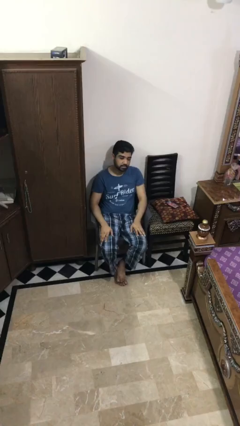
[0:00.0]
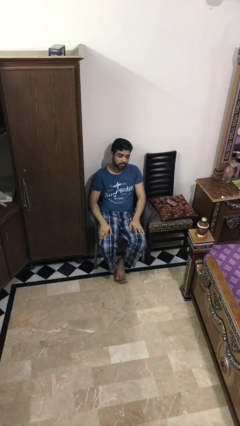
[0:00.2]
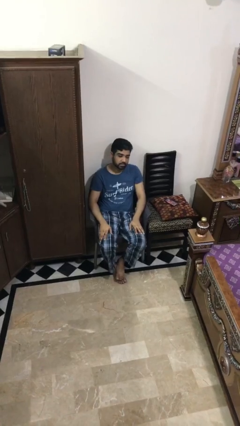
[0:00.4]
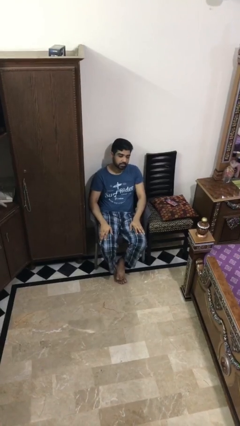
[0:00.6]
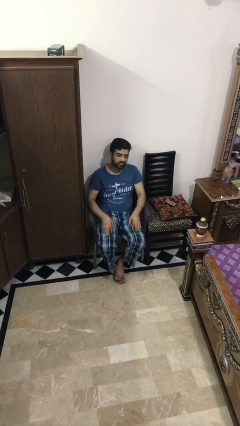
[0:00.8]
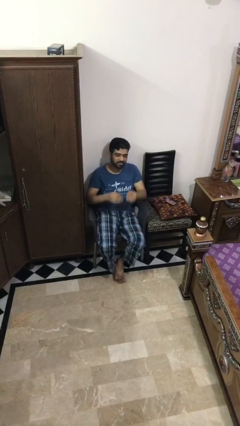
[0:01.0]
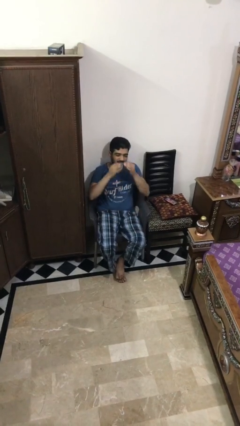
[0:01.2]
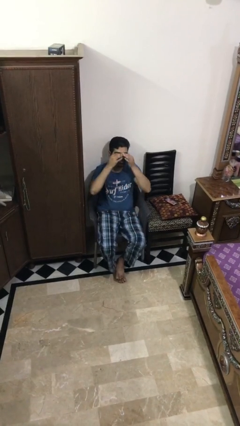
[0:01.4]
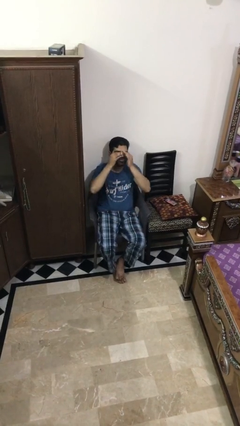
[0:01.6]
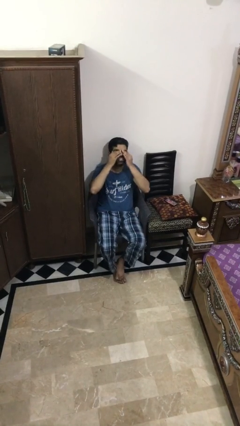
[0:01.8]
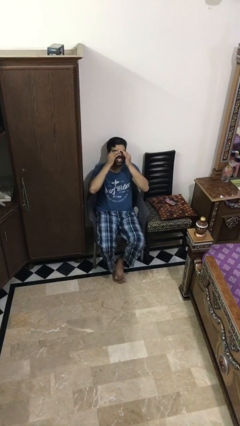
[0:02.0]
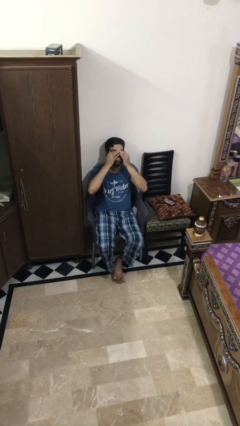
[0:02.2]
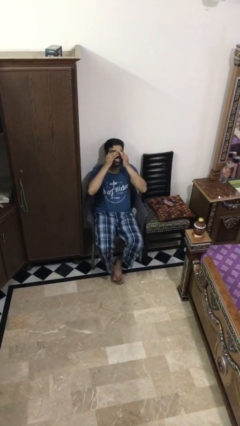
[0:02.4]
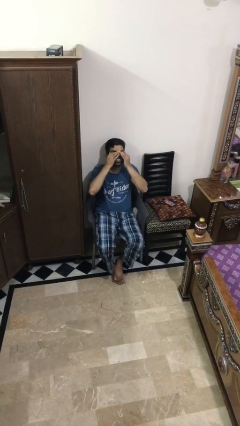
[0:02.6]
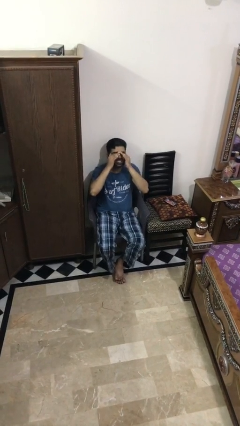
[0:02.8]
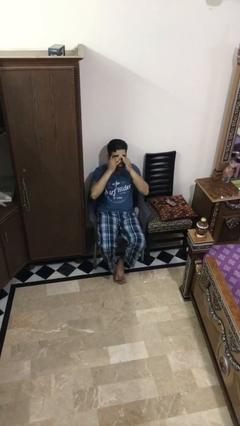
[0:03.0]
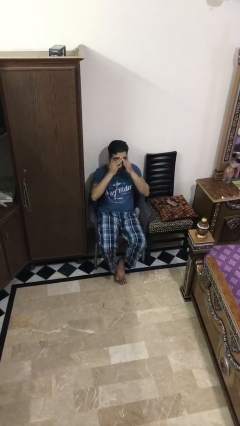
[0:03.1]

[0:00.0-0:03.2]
person rubs eyes

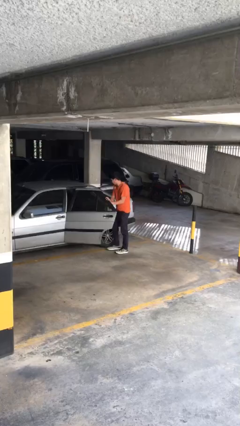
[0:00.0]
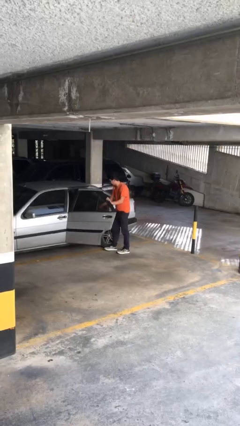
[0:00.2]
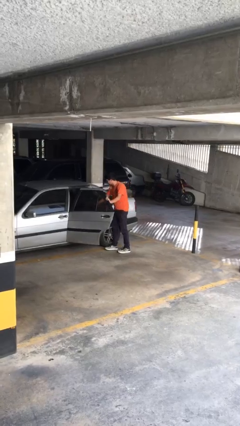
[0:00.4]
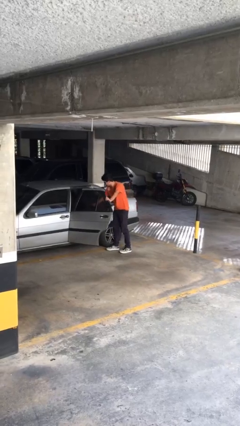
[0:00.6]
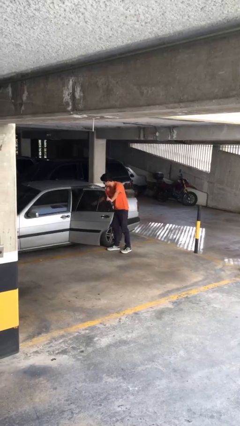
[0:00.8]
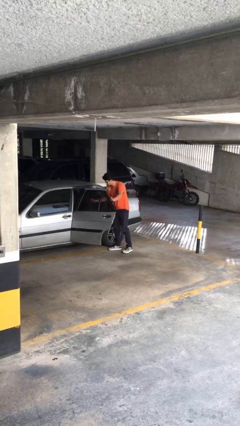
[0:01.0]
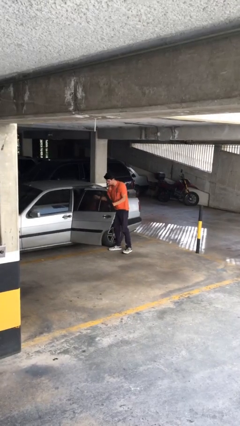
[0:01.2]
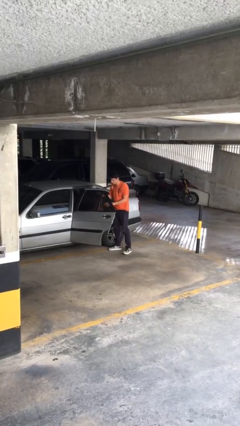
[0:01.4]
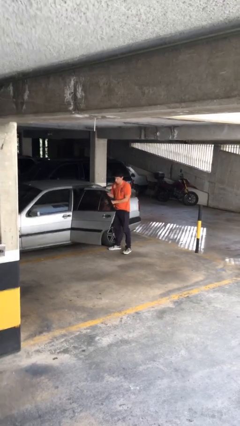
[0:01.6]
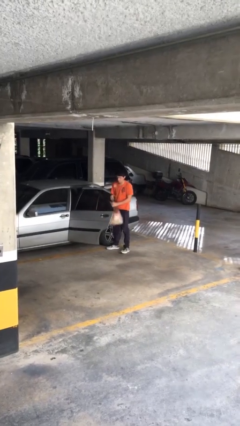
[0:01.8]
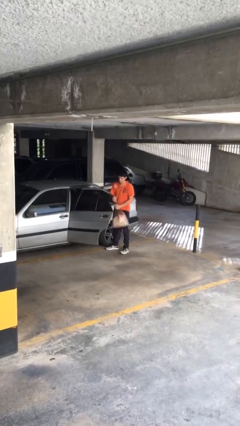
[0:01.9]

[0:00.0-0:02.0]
person unloads car

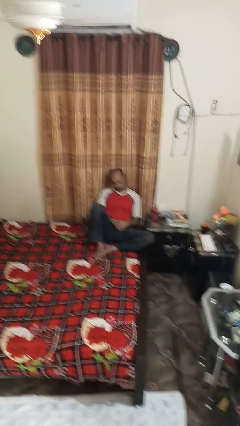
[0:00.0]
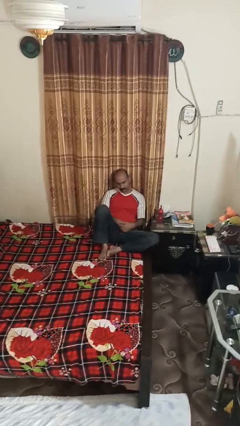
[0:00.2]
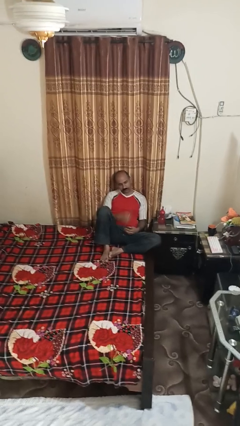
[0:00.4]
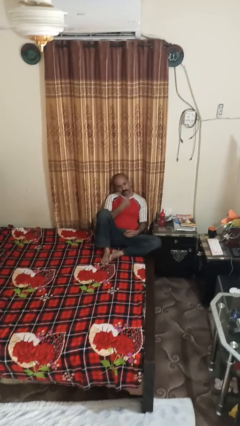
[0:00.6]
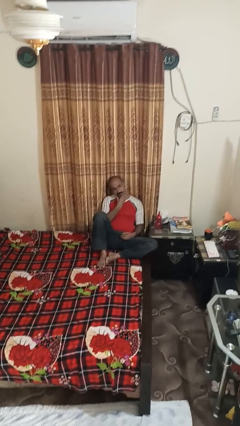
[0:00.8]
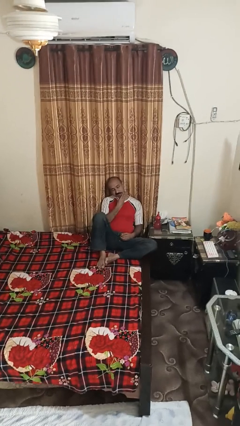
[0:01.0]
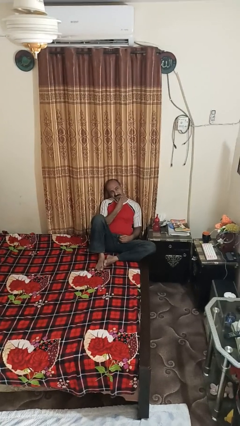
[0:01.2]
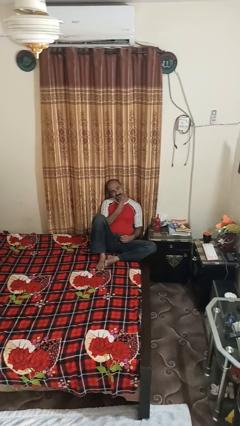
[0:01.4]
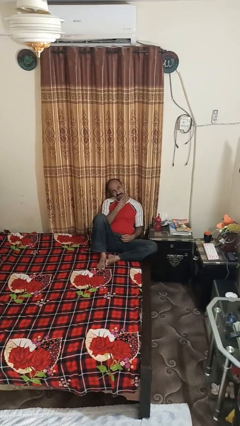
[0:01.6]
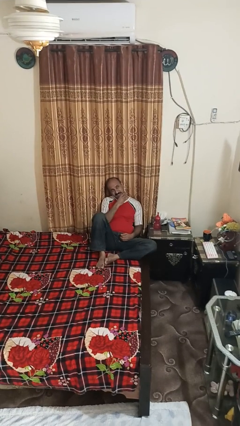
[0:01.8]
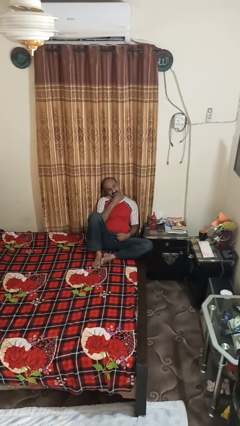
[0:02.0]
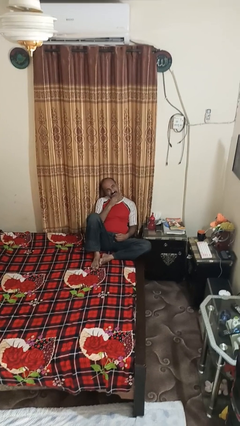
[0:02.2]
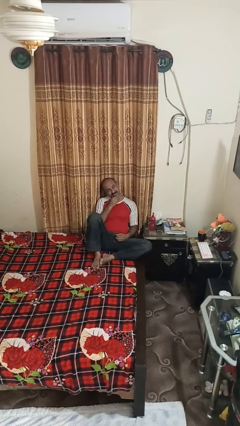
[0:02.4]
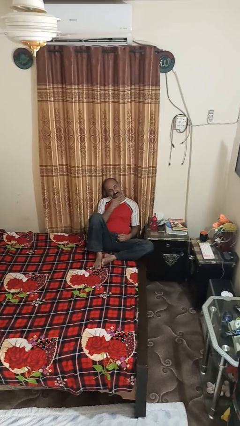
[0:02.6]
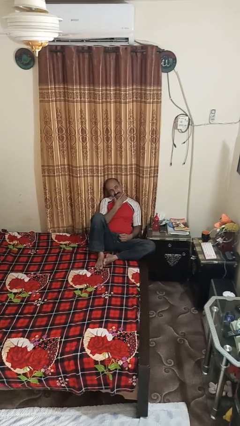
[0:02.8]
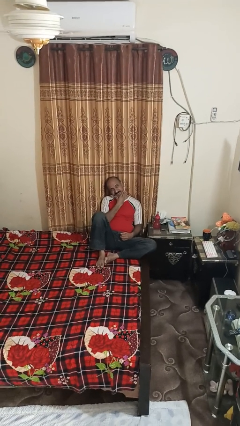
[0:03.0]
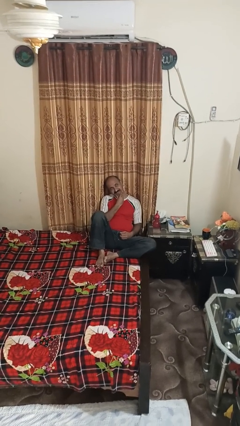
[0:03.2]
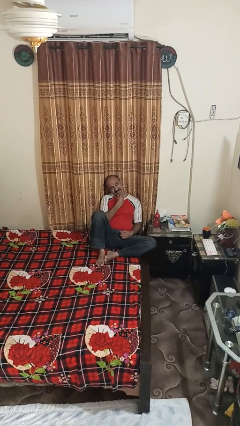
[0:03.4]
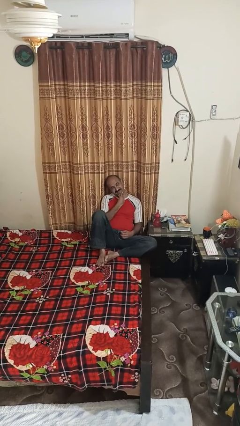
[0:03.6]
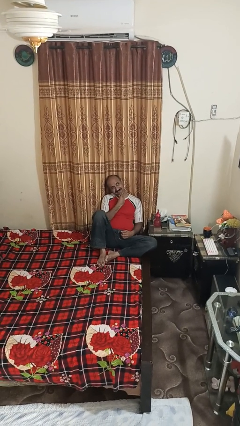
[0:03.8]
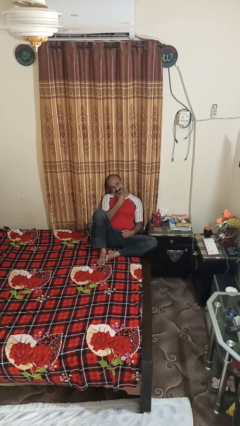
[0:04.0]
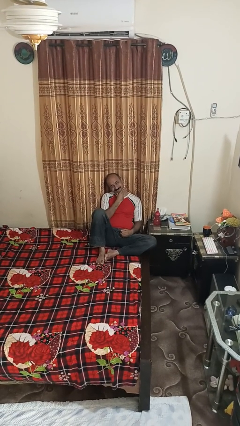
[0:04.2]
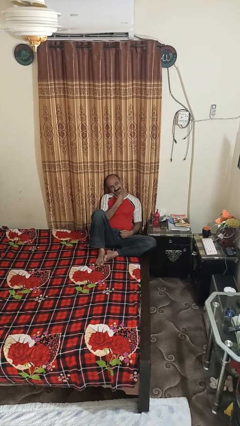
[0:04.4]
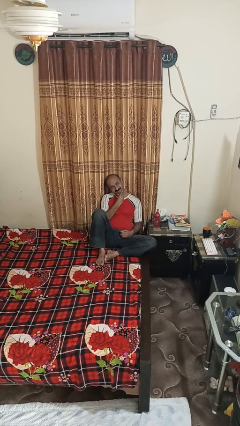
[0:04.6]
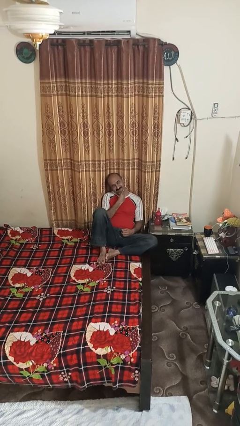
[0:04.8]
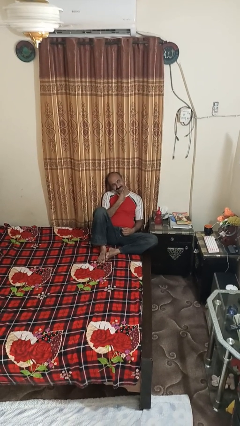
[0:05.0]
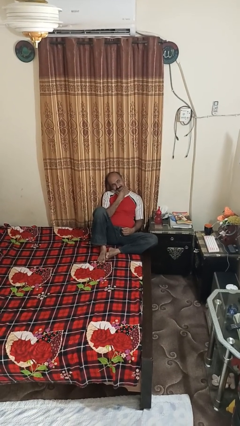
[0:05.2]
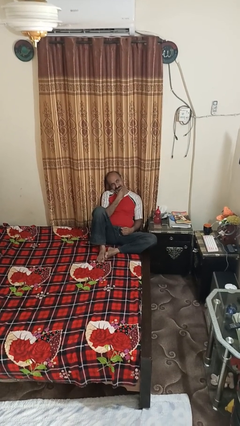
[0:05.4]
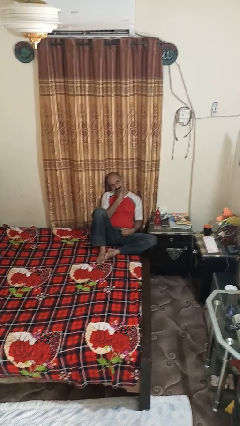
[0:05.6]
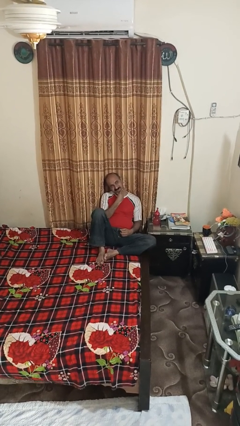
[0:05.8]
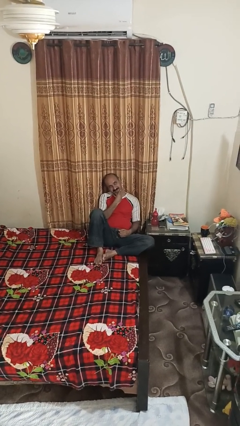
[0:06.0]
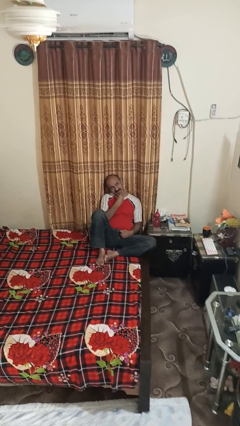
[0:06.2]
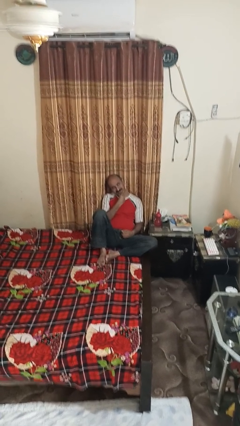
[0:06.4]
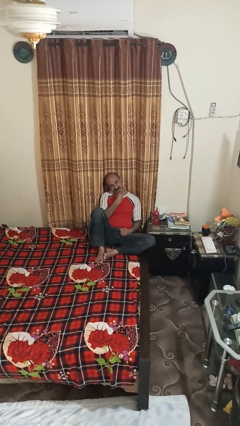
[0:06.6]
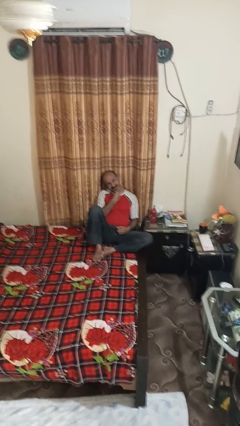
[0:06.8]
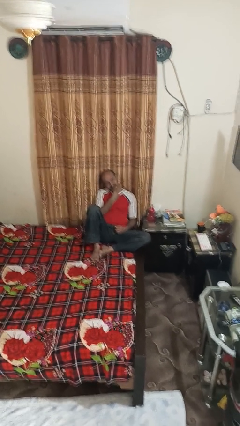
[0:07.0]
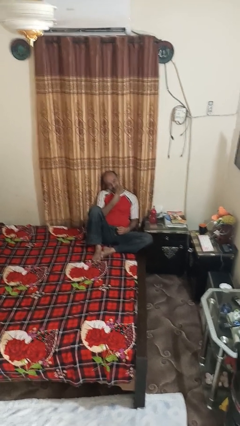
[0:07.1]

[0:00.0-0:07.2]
person strokes chin

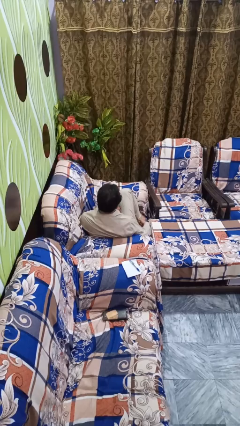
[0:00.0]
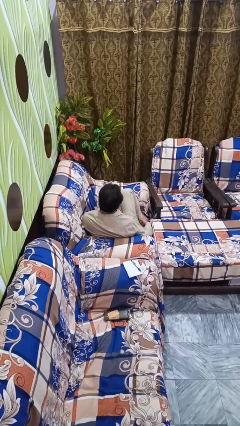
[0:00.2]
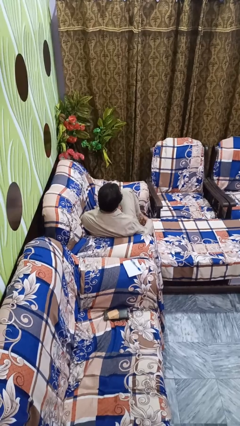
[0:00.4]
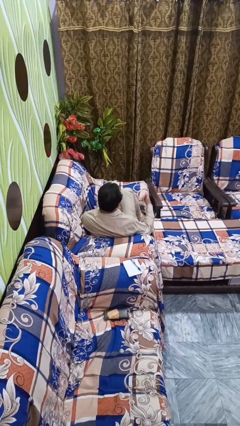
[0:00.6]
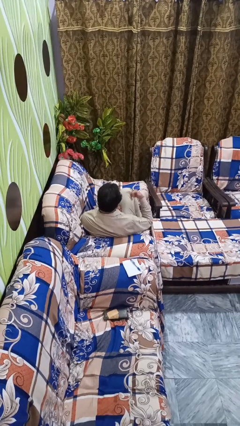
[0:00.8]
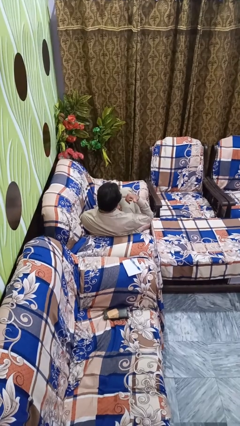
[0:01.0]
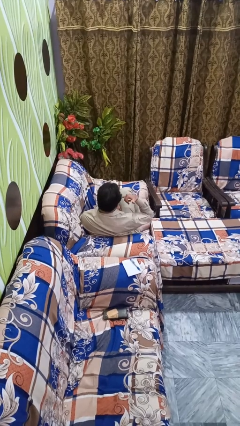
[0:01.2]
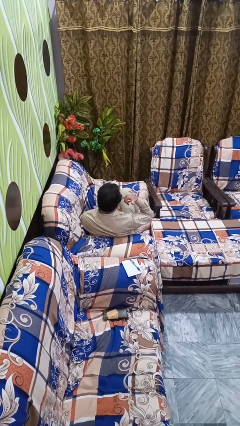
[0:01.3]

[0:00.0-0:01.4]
person gestures call me

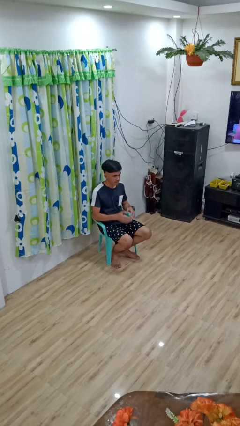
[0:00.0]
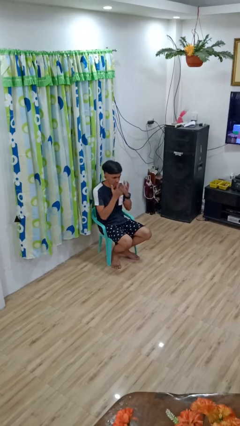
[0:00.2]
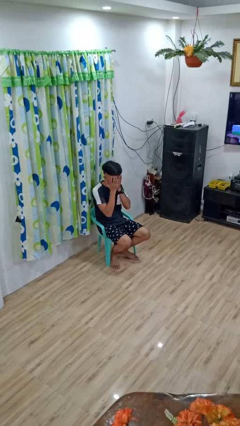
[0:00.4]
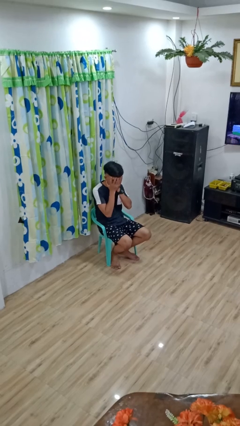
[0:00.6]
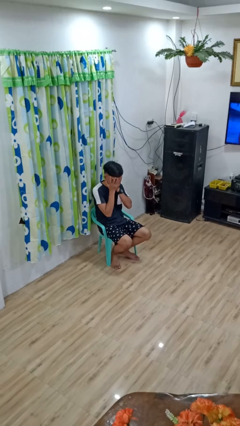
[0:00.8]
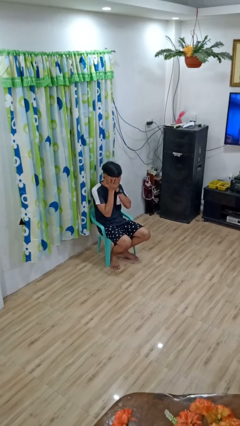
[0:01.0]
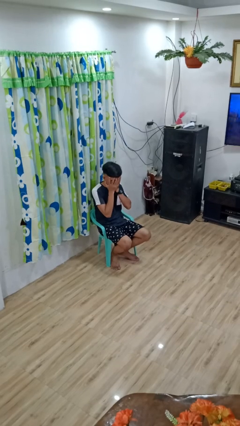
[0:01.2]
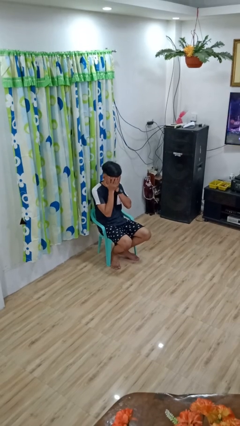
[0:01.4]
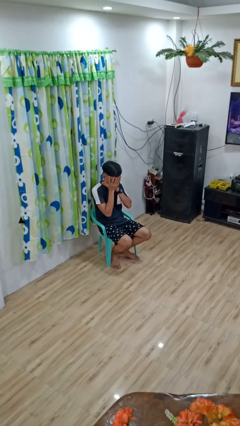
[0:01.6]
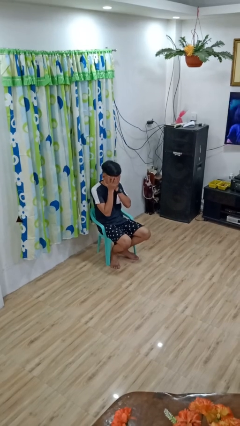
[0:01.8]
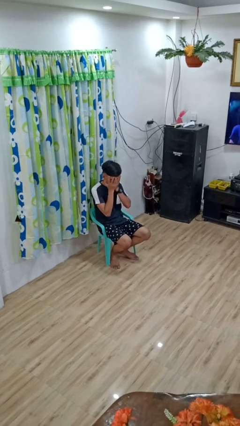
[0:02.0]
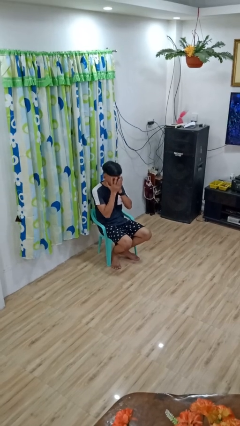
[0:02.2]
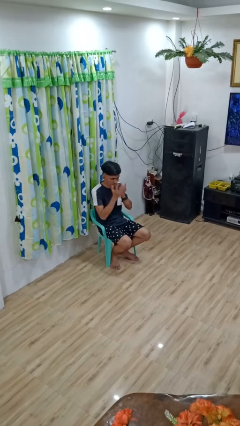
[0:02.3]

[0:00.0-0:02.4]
person covers face with hands

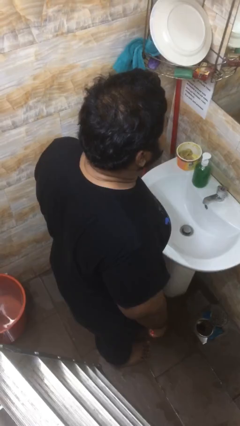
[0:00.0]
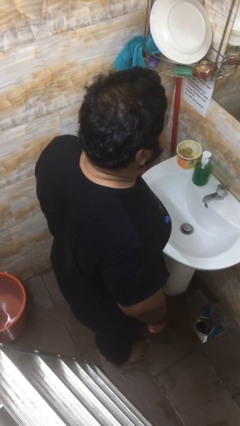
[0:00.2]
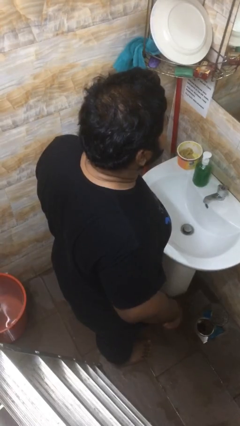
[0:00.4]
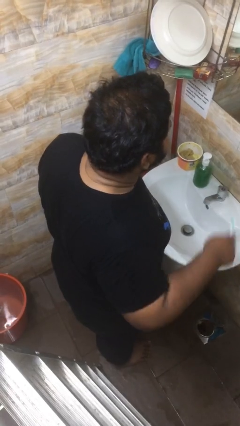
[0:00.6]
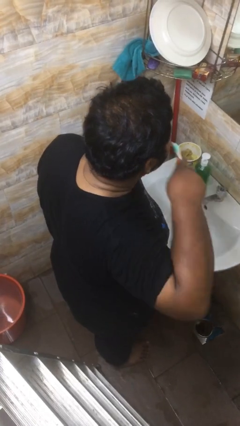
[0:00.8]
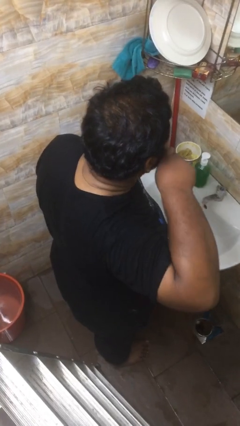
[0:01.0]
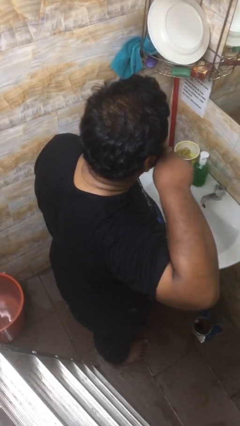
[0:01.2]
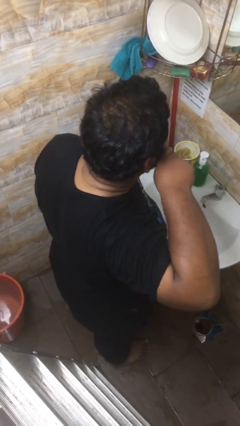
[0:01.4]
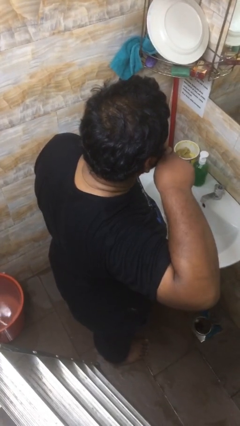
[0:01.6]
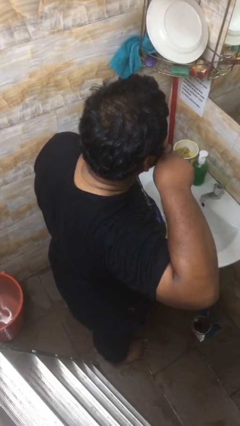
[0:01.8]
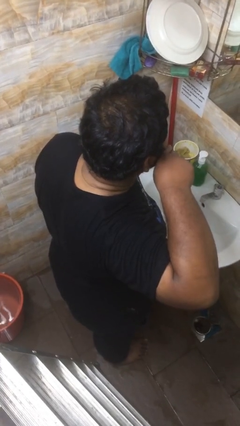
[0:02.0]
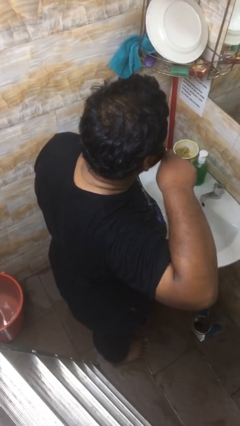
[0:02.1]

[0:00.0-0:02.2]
person brushes teeth
